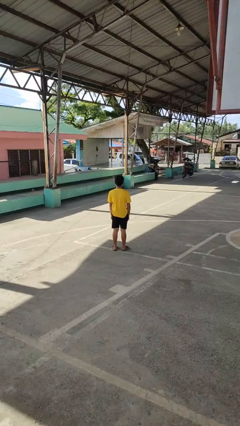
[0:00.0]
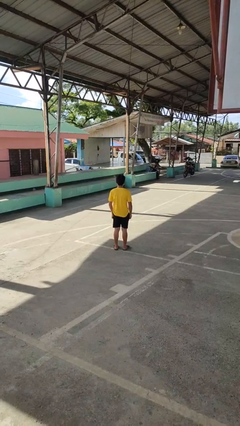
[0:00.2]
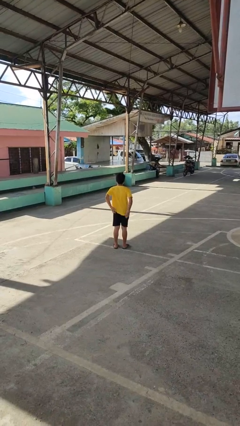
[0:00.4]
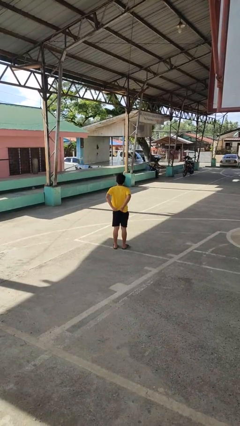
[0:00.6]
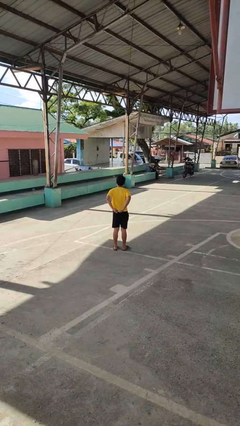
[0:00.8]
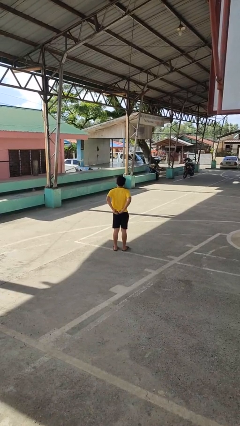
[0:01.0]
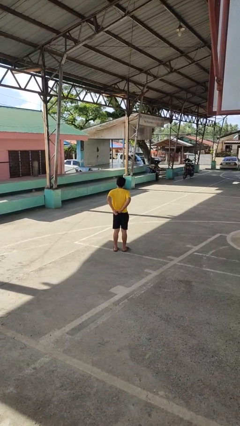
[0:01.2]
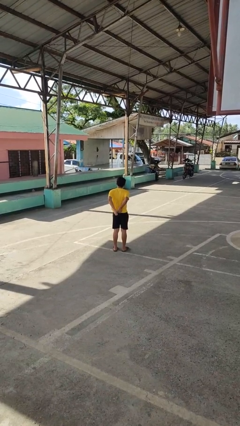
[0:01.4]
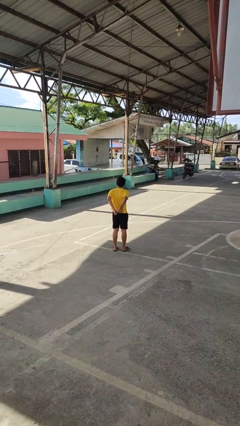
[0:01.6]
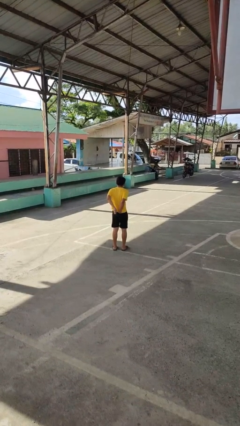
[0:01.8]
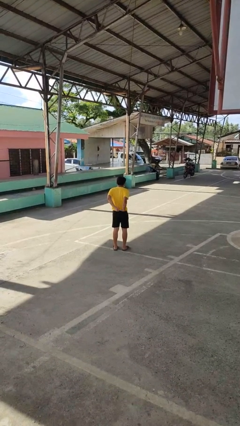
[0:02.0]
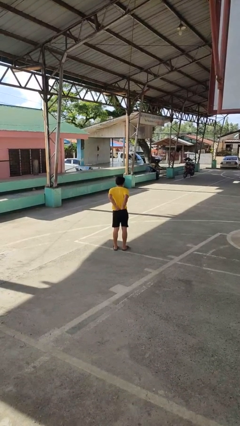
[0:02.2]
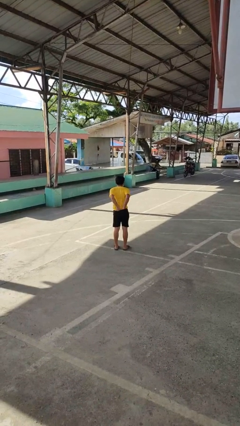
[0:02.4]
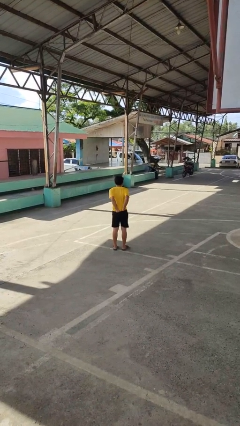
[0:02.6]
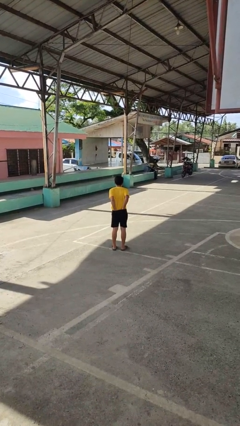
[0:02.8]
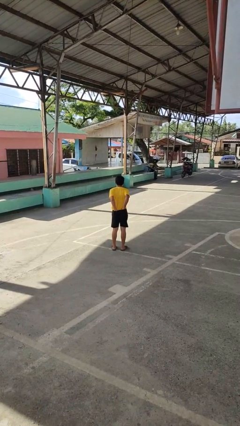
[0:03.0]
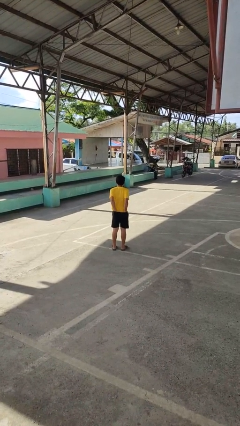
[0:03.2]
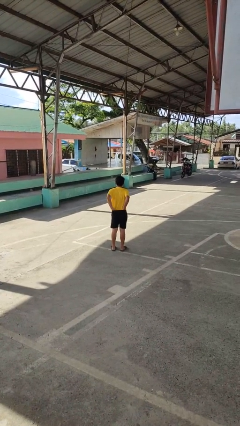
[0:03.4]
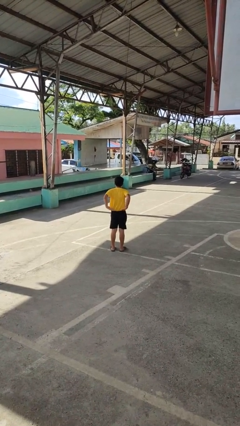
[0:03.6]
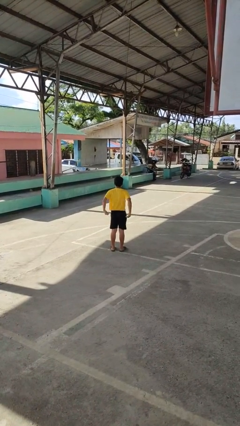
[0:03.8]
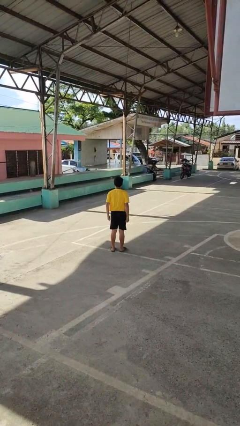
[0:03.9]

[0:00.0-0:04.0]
person tucks in shirt

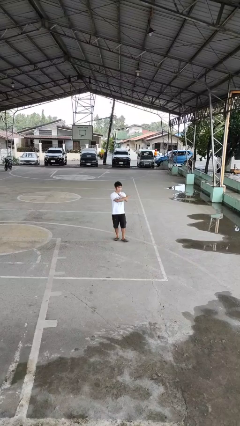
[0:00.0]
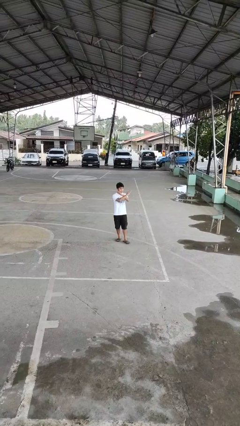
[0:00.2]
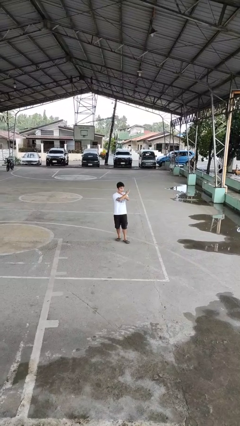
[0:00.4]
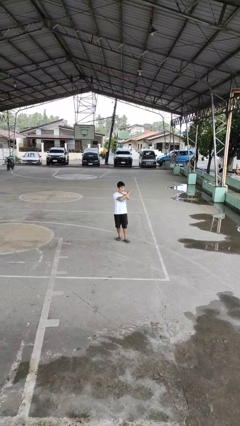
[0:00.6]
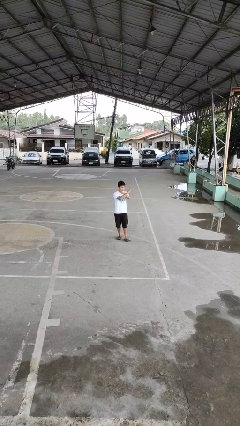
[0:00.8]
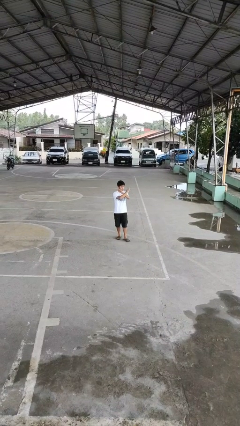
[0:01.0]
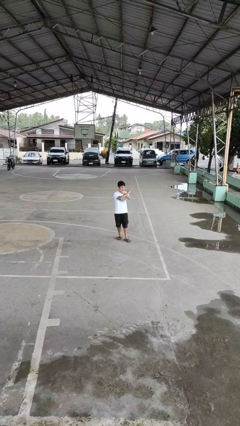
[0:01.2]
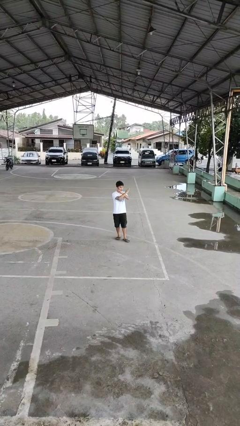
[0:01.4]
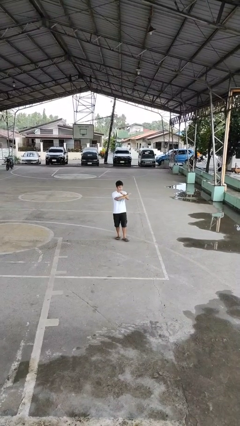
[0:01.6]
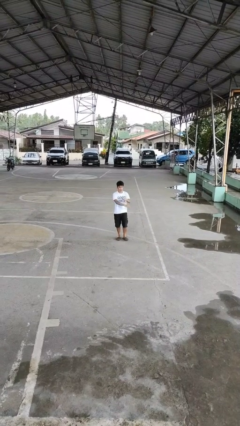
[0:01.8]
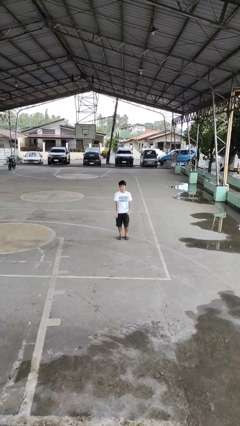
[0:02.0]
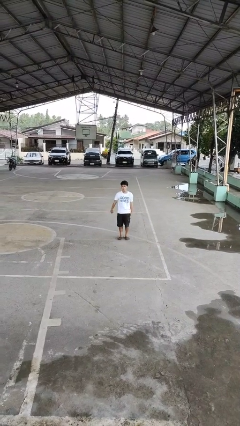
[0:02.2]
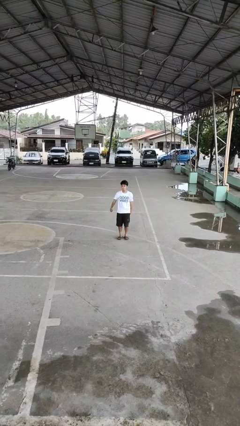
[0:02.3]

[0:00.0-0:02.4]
person gestures arms x

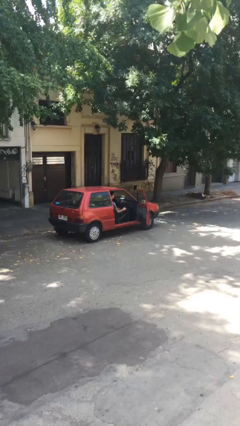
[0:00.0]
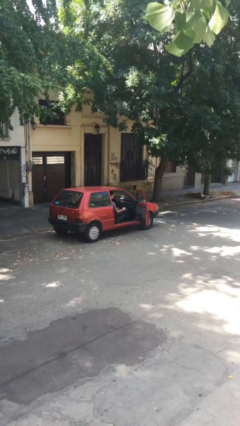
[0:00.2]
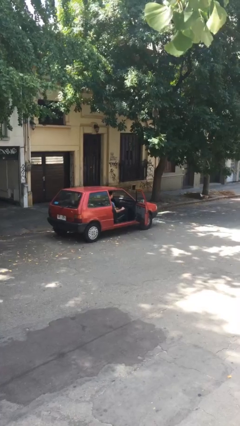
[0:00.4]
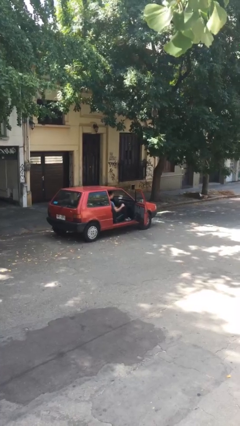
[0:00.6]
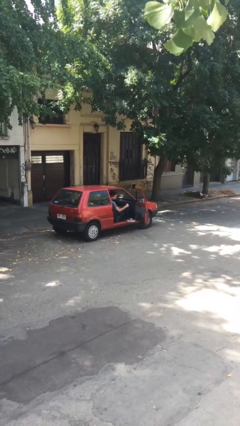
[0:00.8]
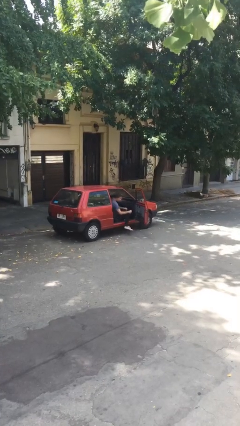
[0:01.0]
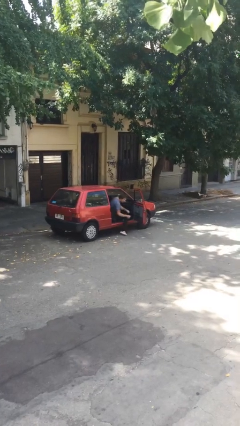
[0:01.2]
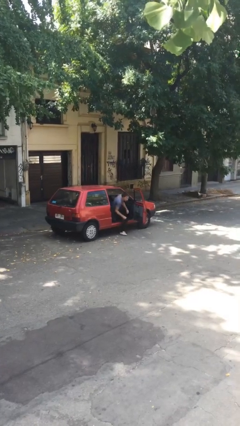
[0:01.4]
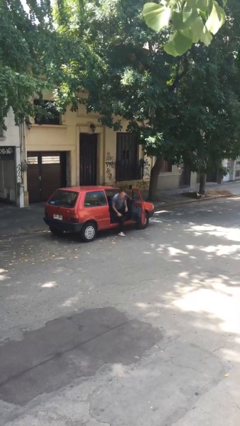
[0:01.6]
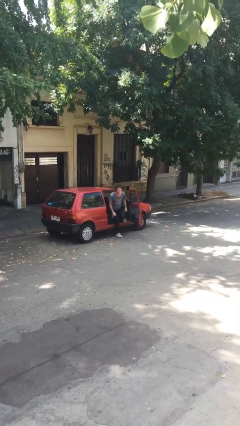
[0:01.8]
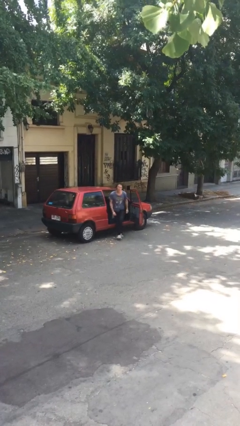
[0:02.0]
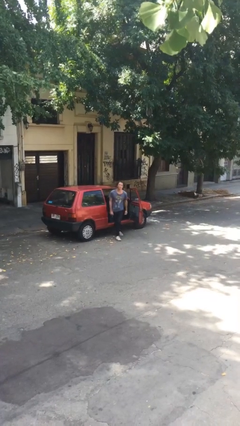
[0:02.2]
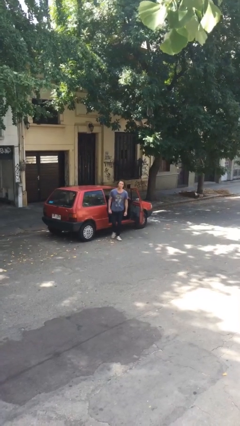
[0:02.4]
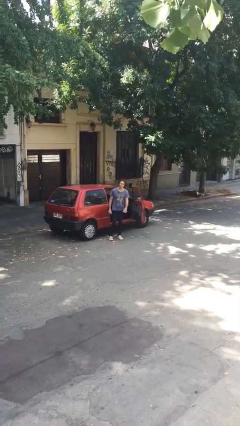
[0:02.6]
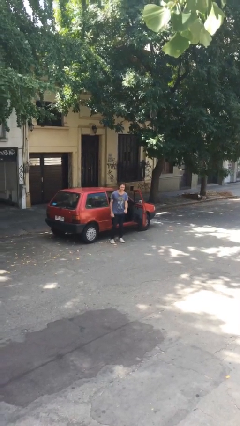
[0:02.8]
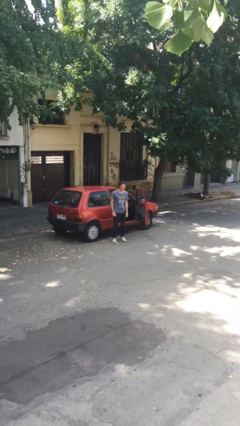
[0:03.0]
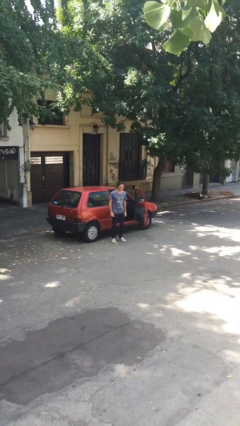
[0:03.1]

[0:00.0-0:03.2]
person exits car

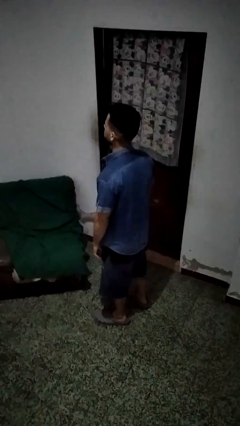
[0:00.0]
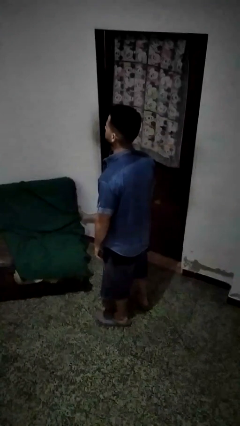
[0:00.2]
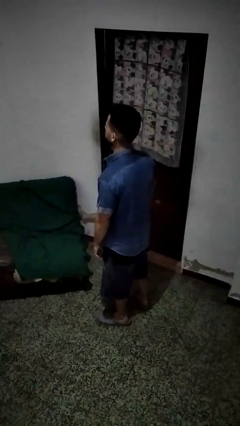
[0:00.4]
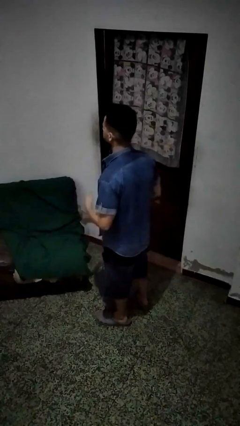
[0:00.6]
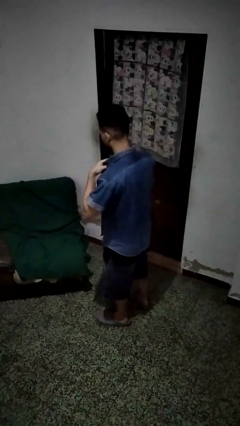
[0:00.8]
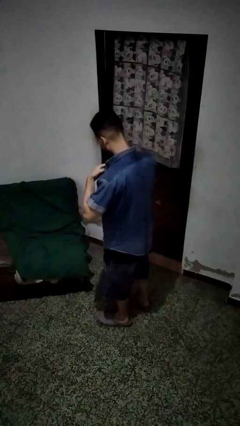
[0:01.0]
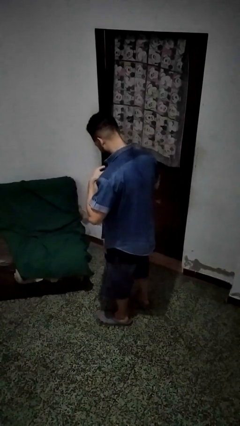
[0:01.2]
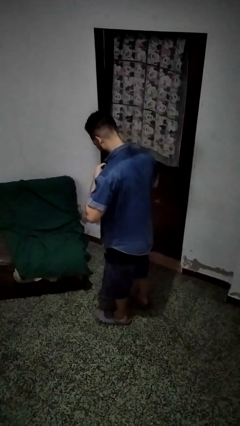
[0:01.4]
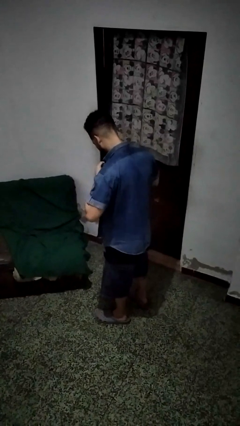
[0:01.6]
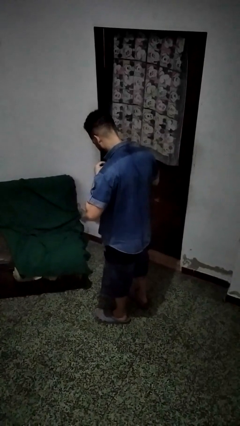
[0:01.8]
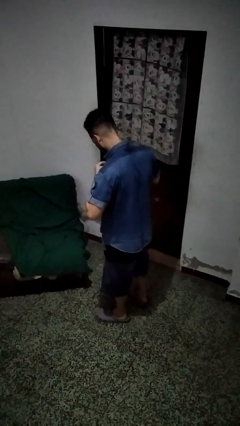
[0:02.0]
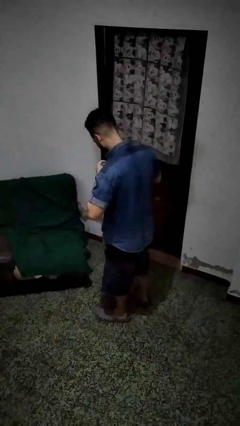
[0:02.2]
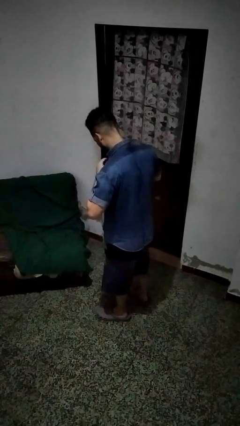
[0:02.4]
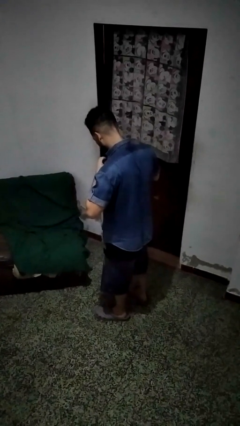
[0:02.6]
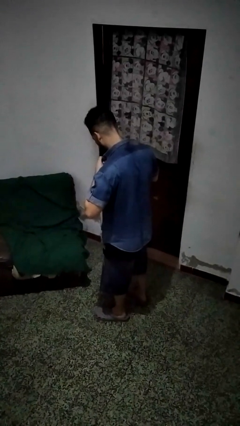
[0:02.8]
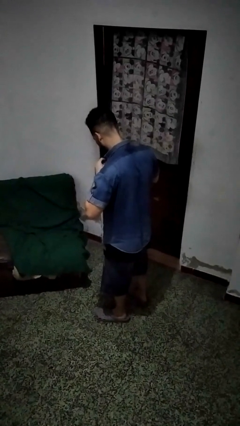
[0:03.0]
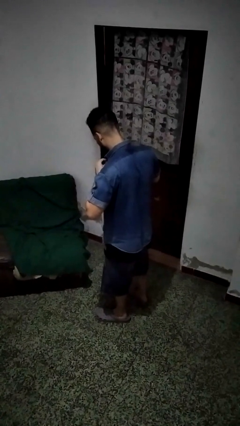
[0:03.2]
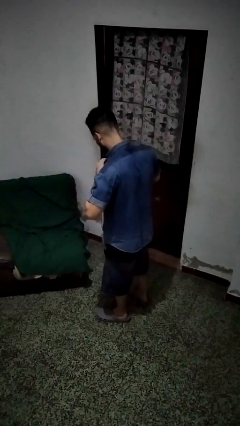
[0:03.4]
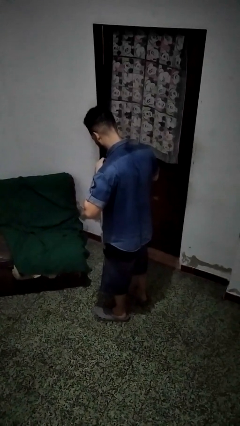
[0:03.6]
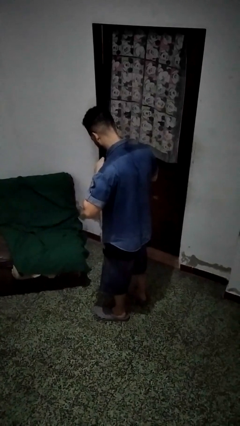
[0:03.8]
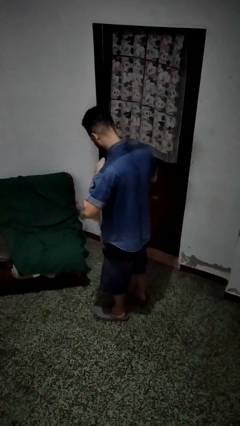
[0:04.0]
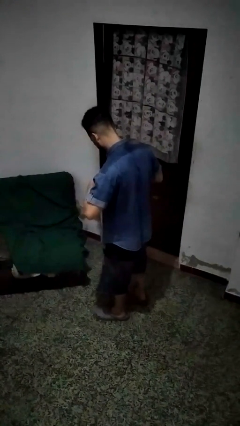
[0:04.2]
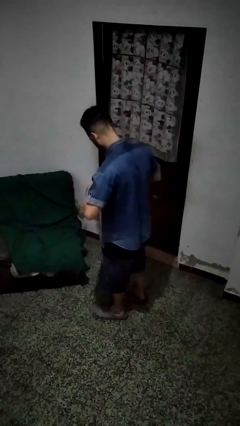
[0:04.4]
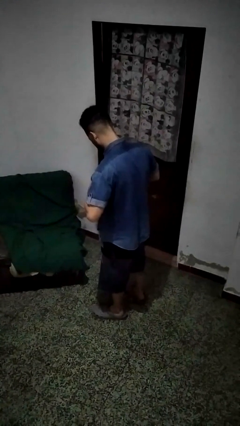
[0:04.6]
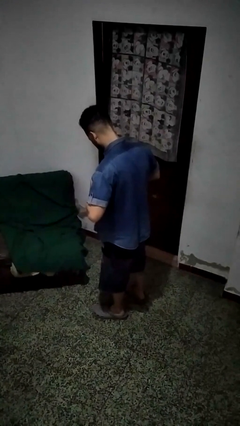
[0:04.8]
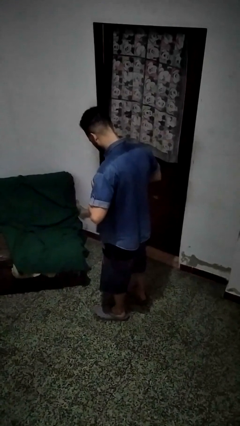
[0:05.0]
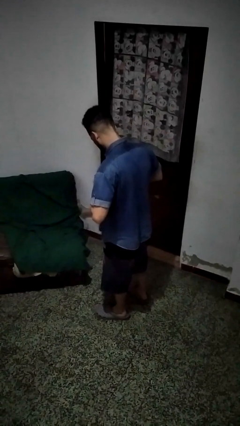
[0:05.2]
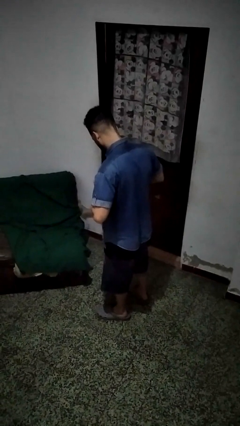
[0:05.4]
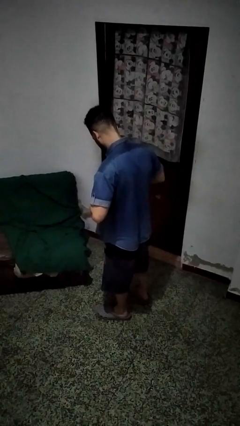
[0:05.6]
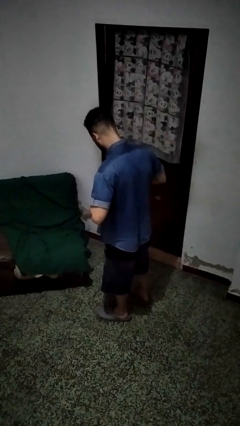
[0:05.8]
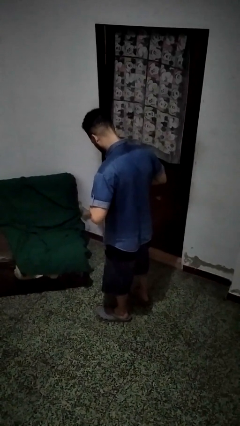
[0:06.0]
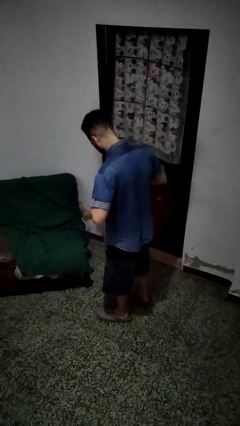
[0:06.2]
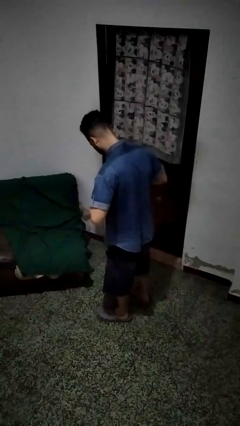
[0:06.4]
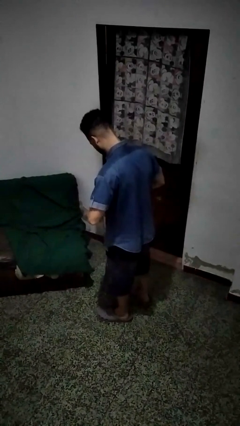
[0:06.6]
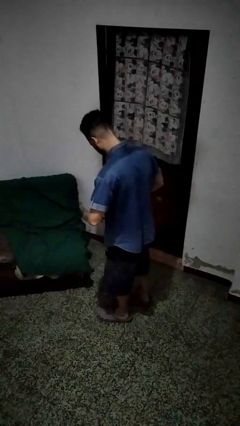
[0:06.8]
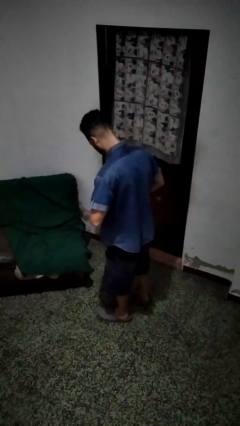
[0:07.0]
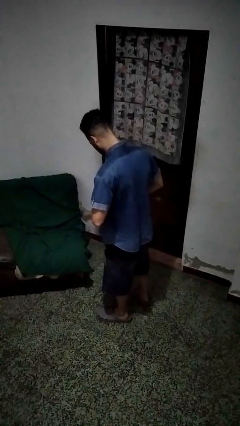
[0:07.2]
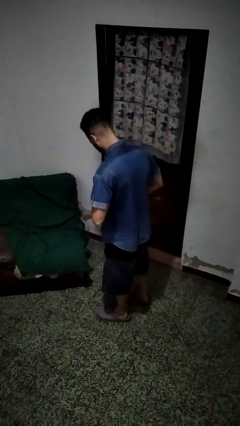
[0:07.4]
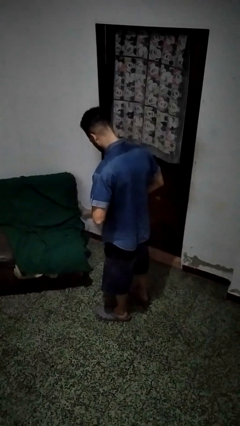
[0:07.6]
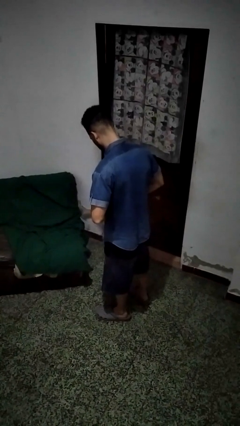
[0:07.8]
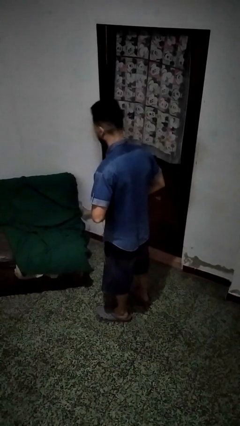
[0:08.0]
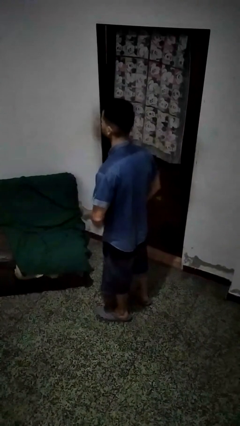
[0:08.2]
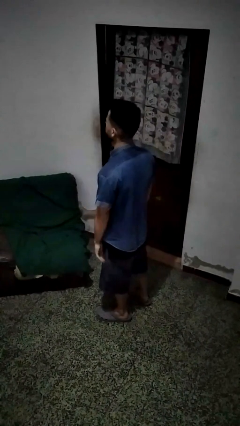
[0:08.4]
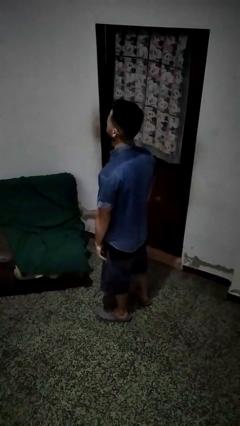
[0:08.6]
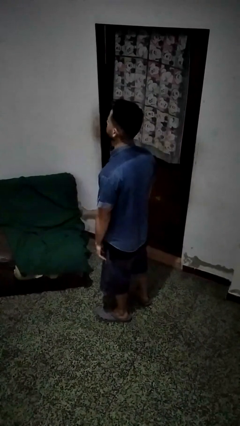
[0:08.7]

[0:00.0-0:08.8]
person buttons shirt
